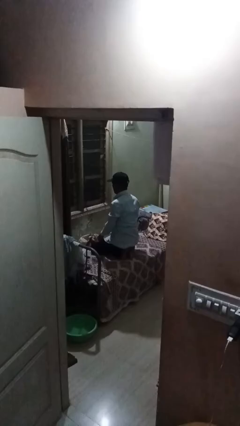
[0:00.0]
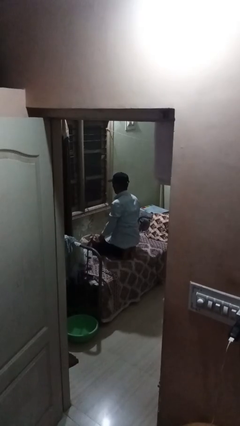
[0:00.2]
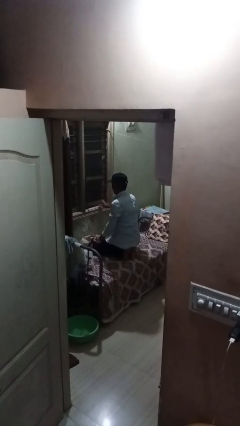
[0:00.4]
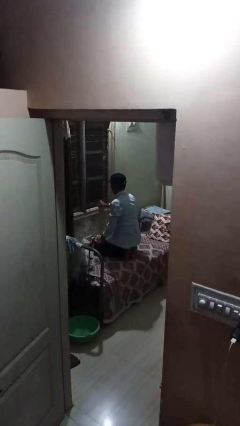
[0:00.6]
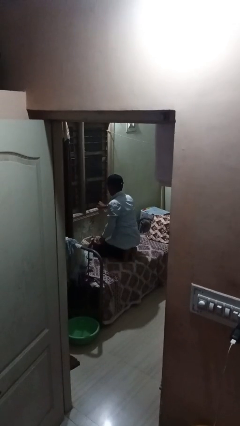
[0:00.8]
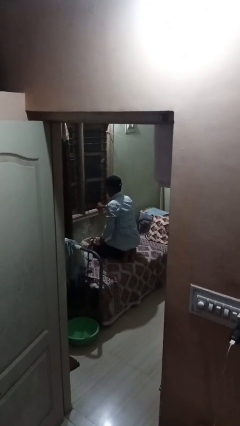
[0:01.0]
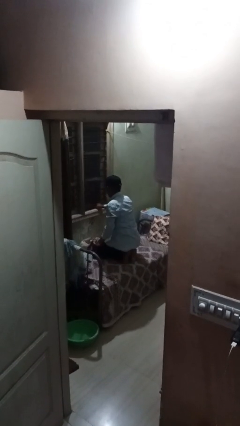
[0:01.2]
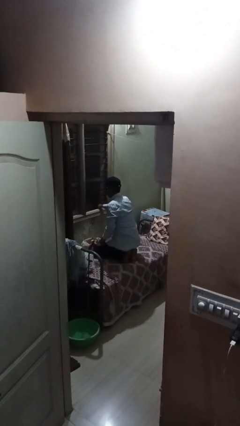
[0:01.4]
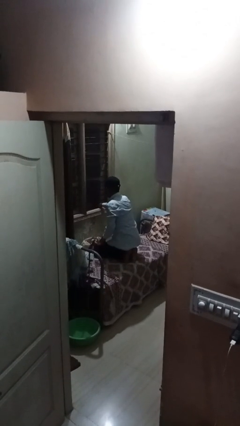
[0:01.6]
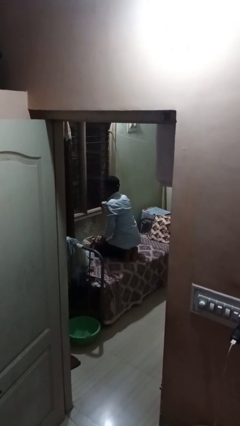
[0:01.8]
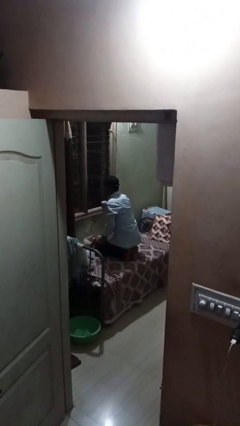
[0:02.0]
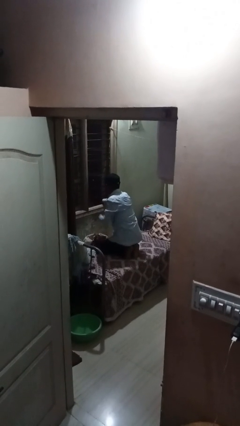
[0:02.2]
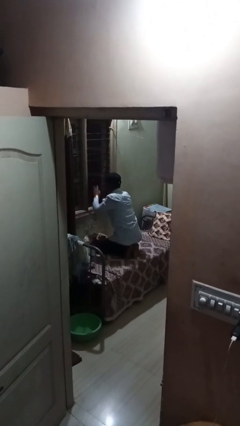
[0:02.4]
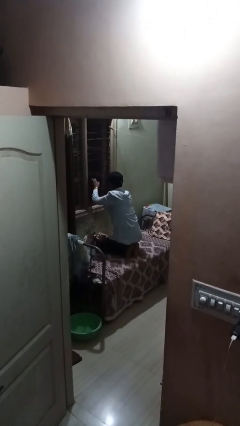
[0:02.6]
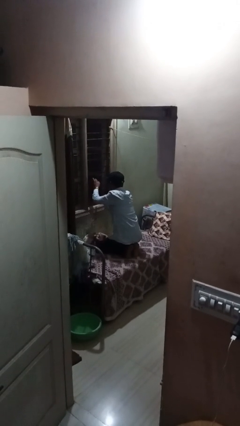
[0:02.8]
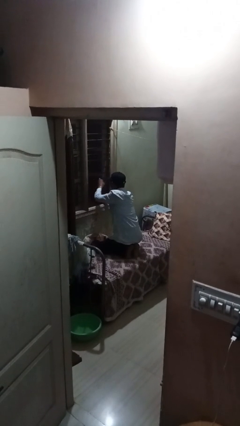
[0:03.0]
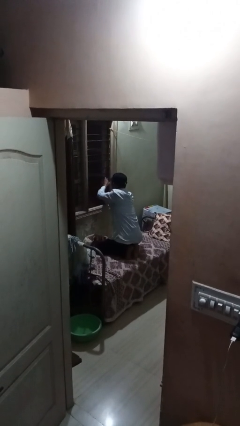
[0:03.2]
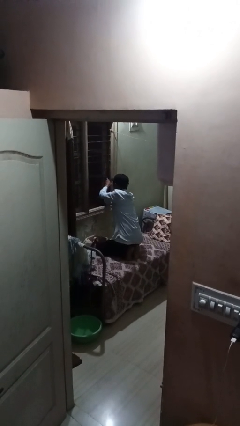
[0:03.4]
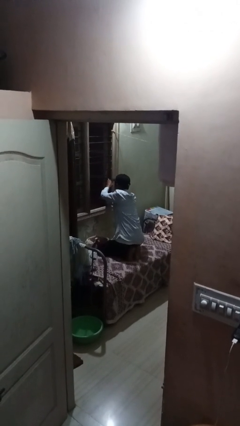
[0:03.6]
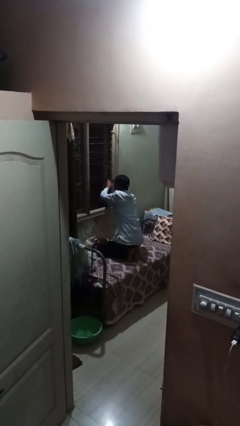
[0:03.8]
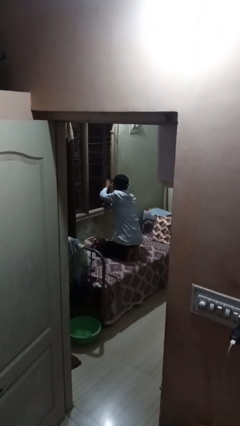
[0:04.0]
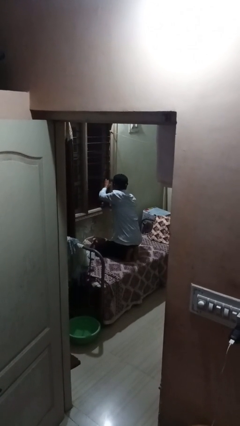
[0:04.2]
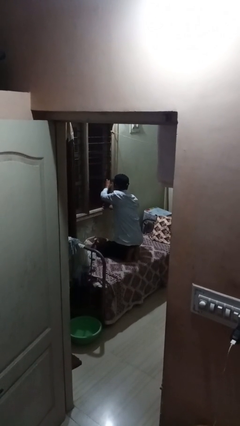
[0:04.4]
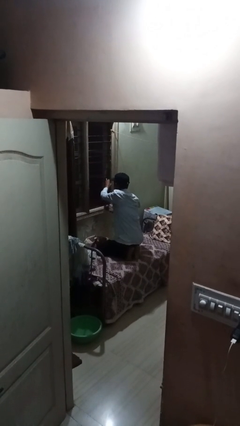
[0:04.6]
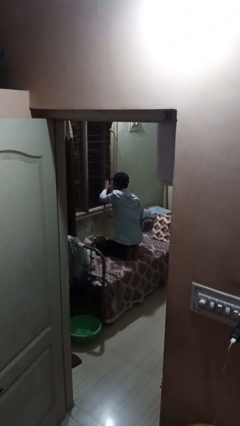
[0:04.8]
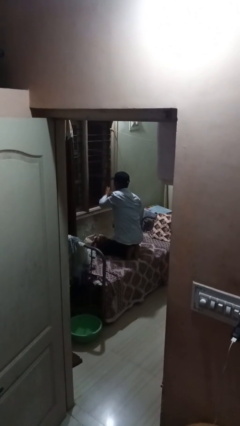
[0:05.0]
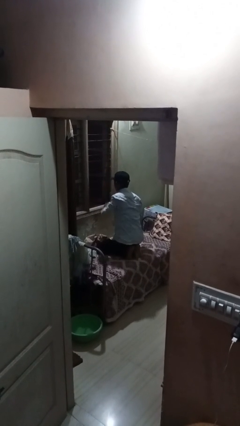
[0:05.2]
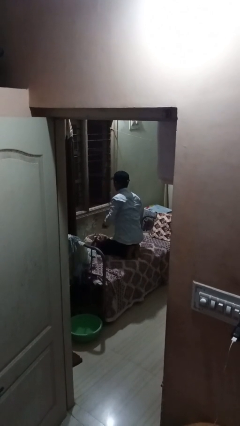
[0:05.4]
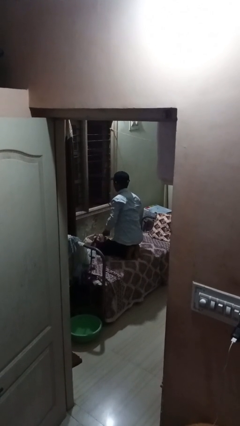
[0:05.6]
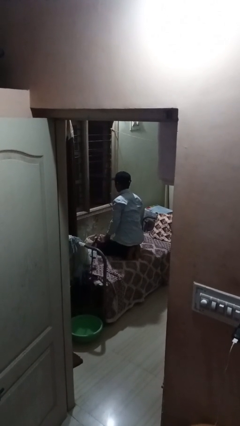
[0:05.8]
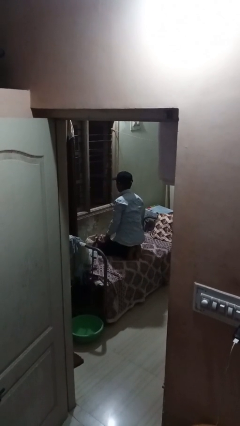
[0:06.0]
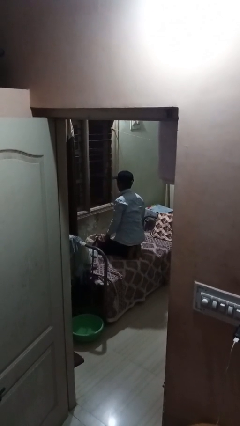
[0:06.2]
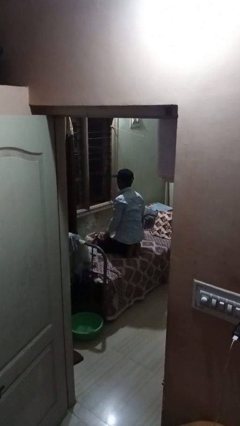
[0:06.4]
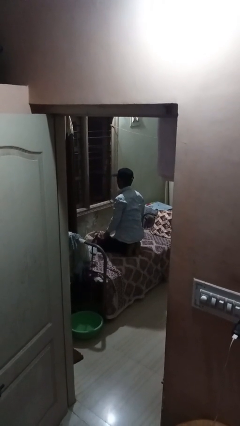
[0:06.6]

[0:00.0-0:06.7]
person opens home window

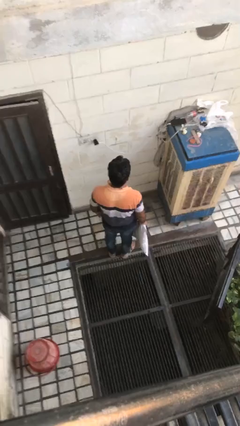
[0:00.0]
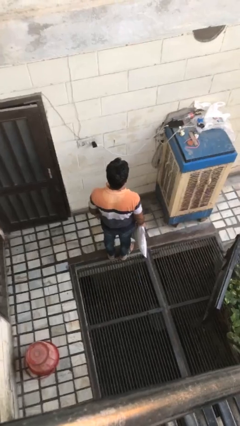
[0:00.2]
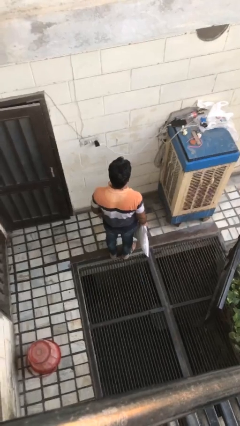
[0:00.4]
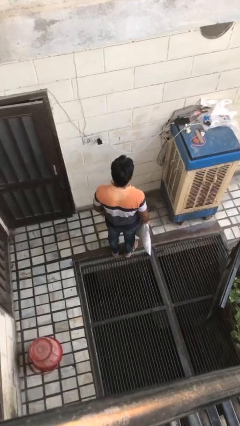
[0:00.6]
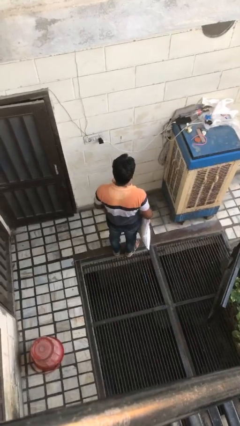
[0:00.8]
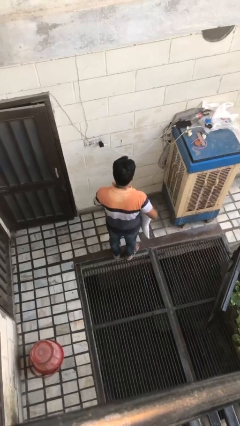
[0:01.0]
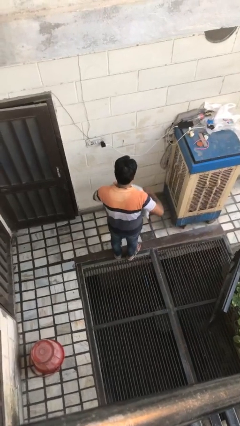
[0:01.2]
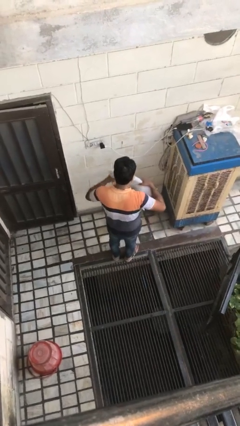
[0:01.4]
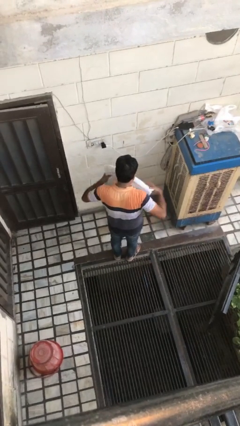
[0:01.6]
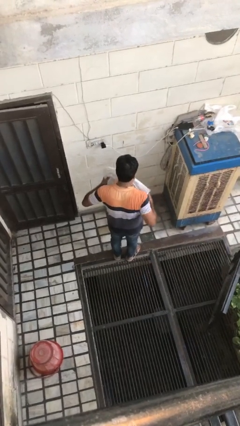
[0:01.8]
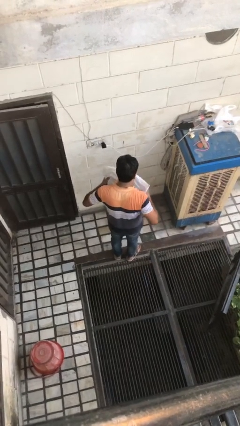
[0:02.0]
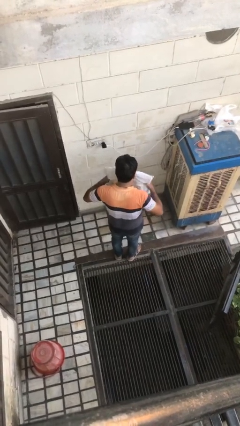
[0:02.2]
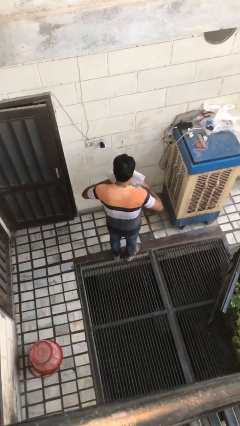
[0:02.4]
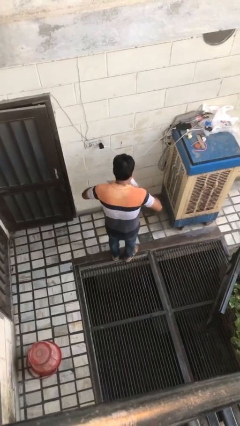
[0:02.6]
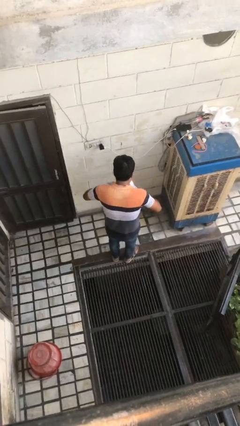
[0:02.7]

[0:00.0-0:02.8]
person squeezes object

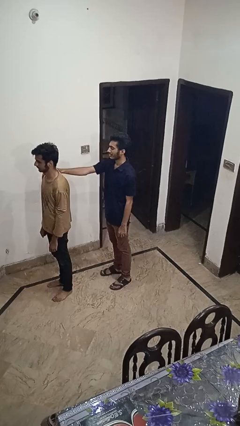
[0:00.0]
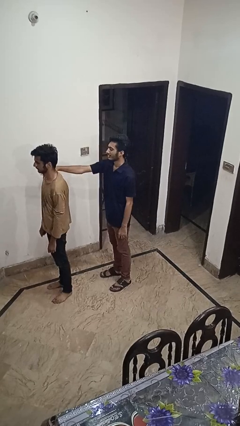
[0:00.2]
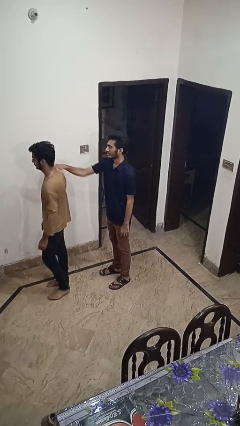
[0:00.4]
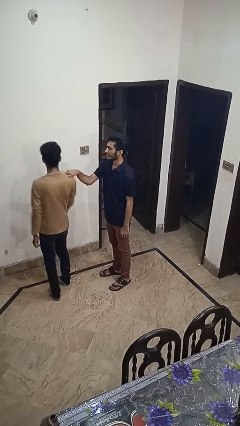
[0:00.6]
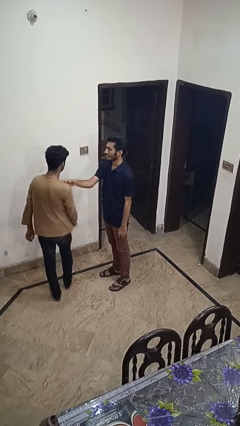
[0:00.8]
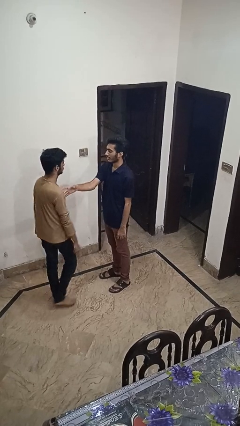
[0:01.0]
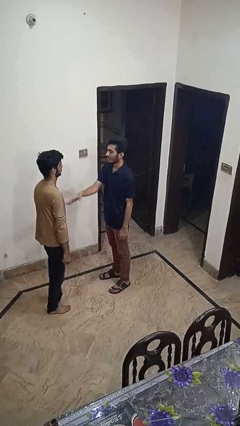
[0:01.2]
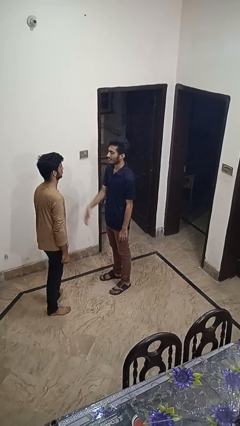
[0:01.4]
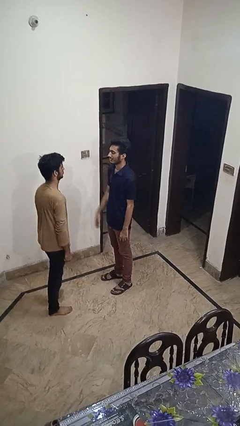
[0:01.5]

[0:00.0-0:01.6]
person spins person around

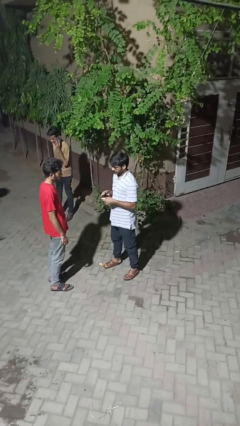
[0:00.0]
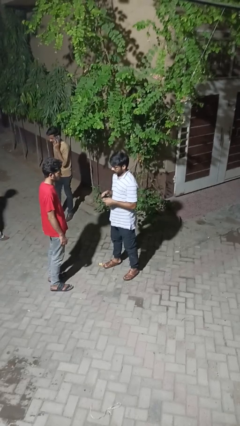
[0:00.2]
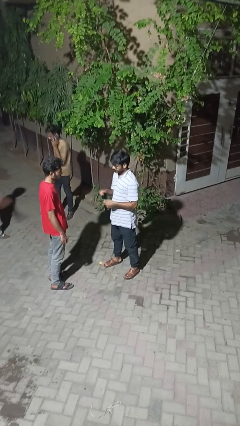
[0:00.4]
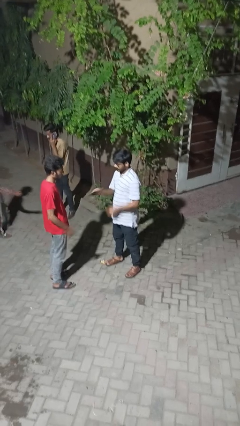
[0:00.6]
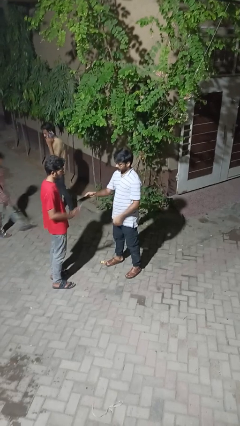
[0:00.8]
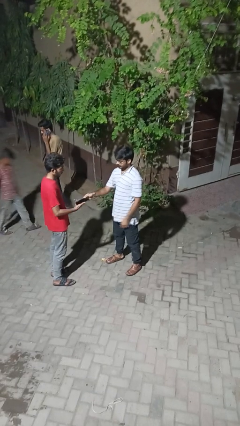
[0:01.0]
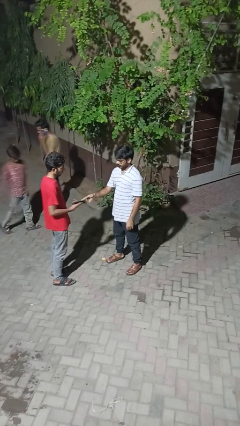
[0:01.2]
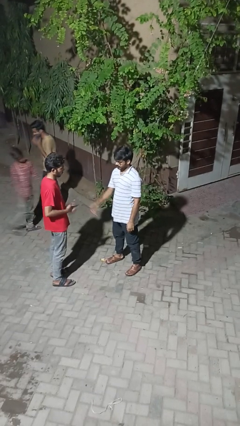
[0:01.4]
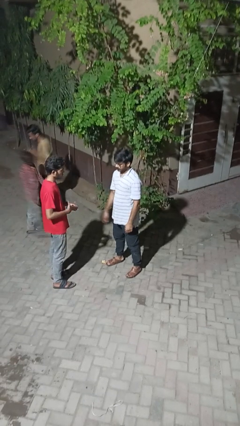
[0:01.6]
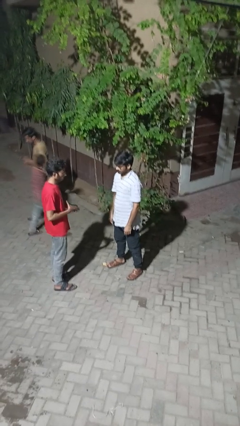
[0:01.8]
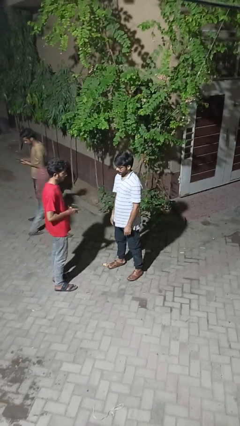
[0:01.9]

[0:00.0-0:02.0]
person transfers object to person

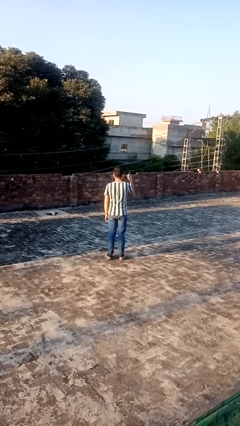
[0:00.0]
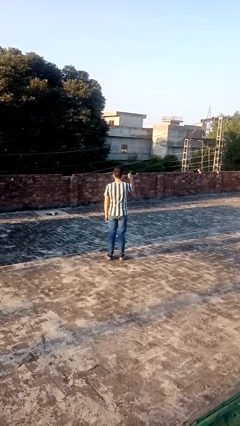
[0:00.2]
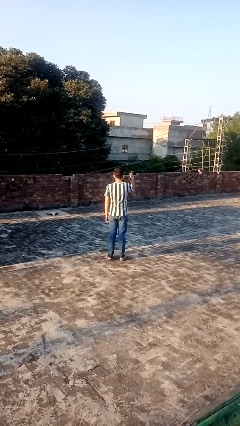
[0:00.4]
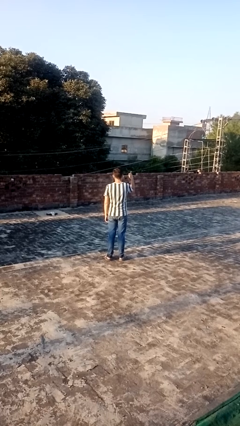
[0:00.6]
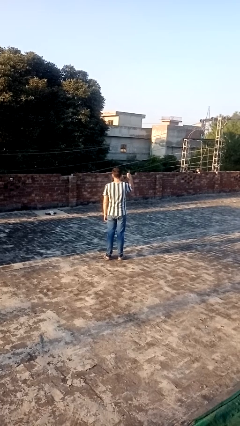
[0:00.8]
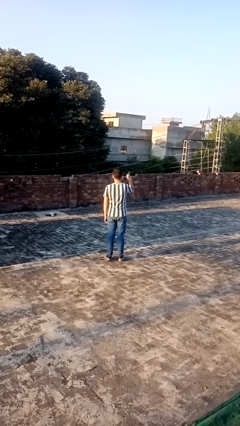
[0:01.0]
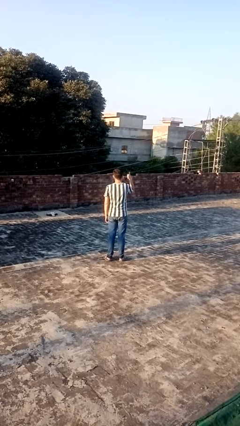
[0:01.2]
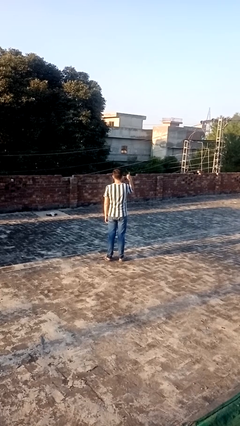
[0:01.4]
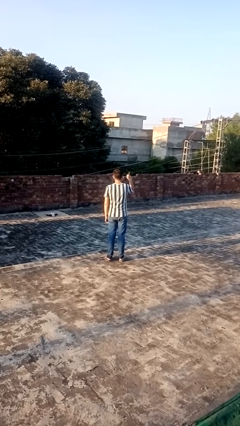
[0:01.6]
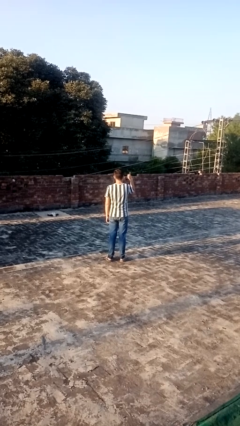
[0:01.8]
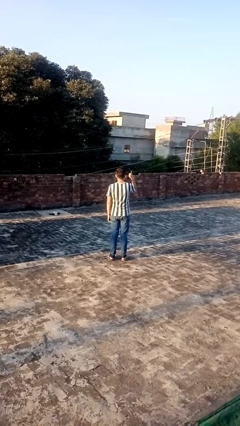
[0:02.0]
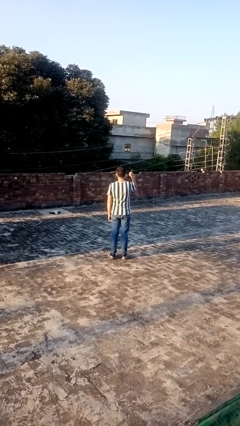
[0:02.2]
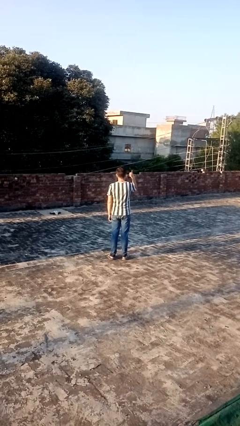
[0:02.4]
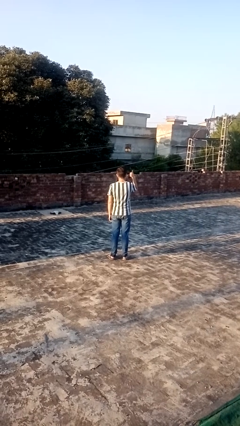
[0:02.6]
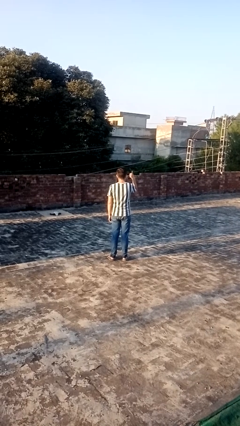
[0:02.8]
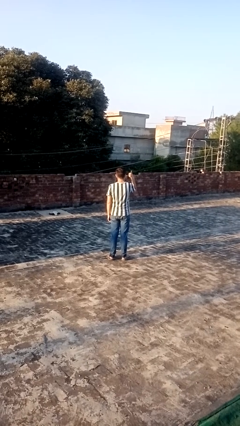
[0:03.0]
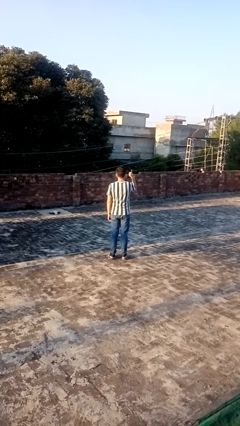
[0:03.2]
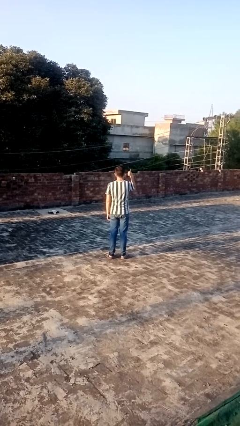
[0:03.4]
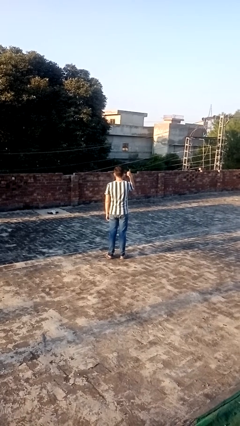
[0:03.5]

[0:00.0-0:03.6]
person gestures thumbs up

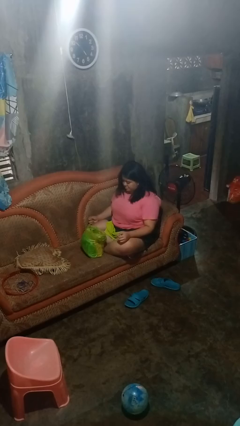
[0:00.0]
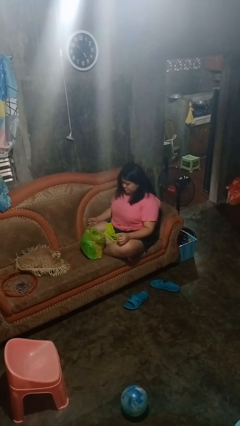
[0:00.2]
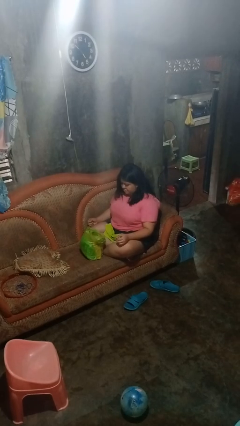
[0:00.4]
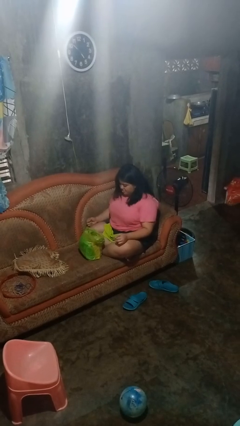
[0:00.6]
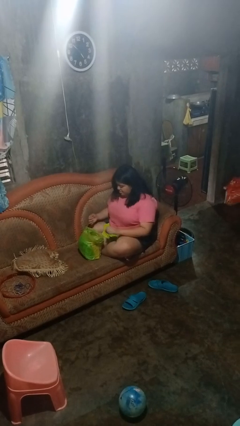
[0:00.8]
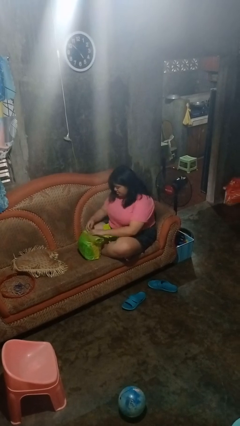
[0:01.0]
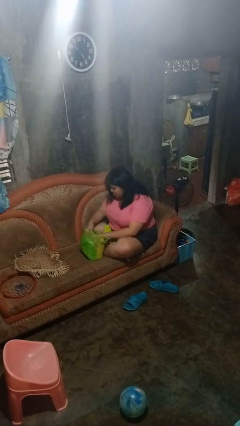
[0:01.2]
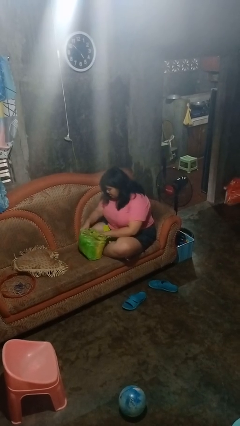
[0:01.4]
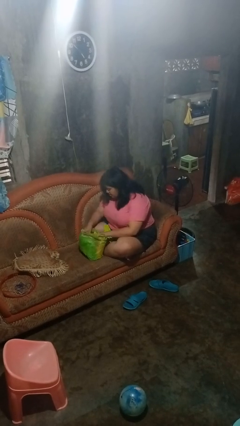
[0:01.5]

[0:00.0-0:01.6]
person searches in bag
